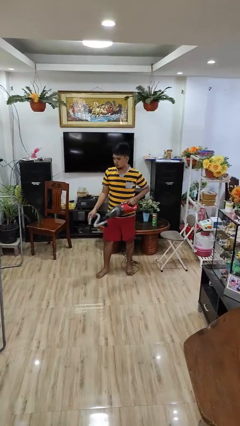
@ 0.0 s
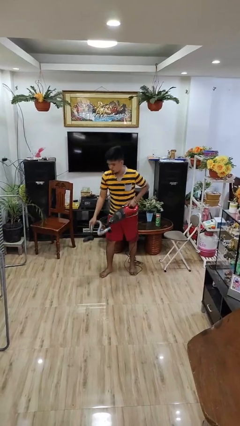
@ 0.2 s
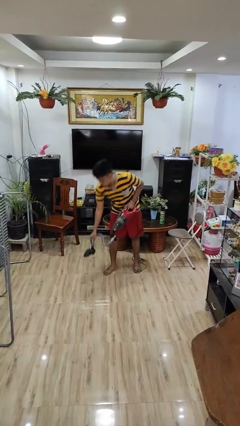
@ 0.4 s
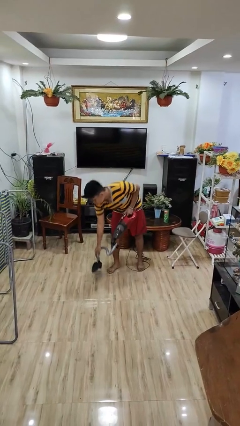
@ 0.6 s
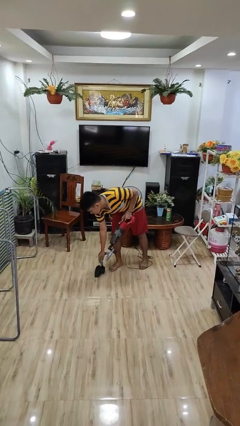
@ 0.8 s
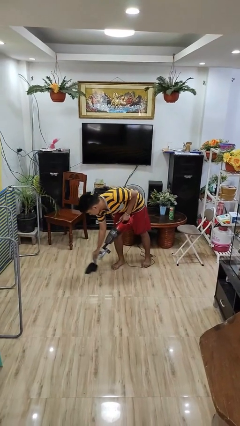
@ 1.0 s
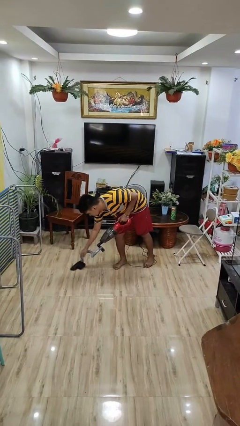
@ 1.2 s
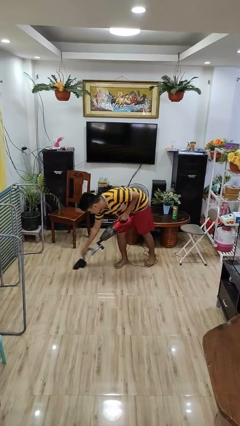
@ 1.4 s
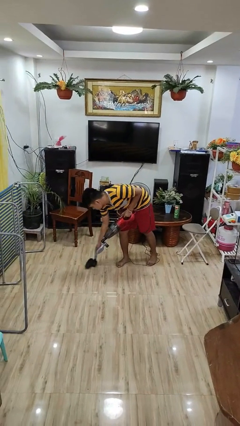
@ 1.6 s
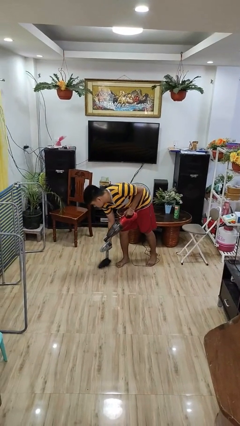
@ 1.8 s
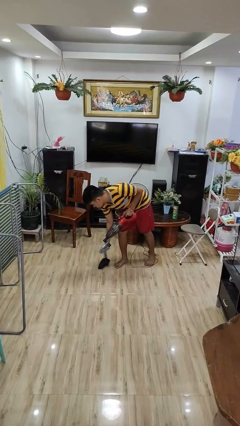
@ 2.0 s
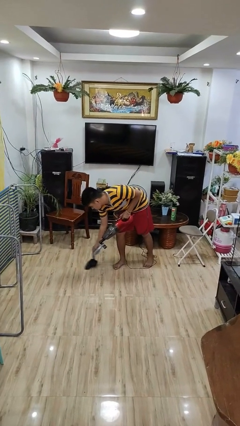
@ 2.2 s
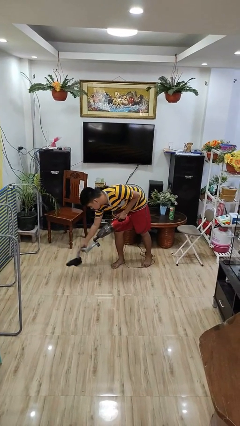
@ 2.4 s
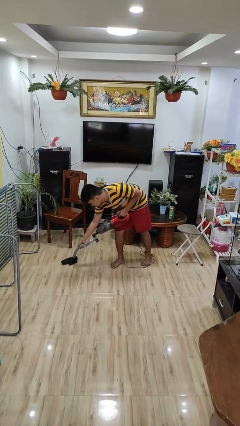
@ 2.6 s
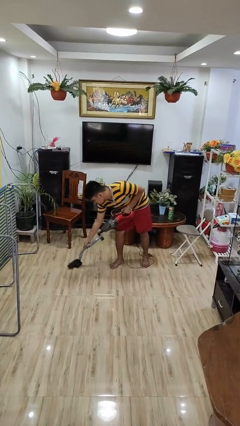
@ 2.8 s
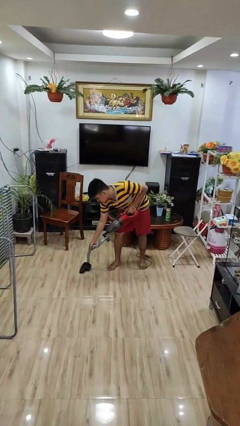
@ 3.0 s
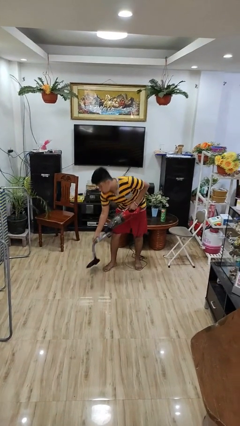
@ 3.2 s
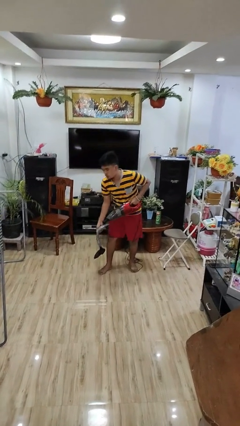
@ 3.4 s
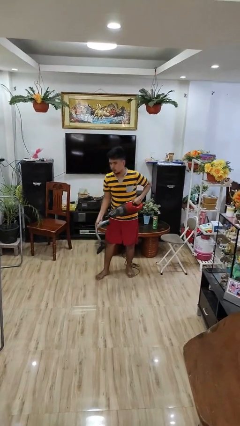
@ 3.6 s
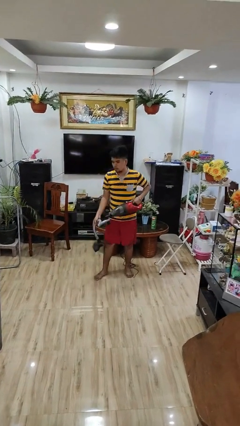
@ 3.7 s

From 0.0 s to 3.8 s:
person vacuums carpet

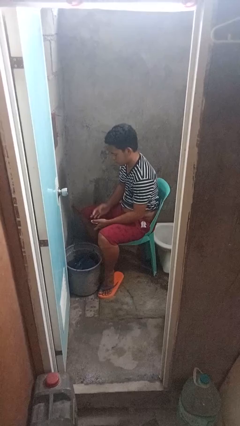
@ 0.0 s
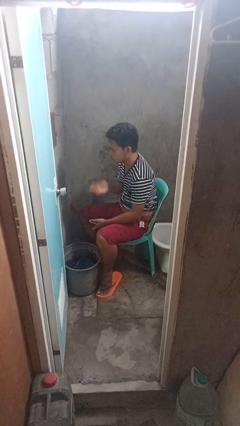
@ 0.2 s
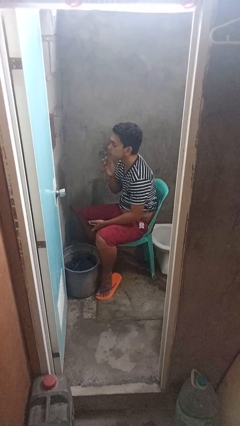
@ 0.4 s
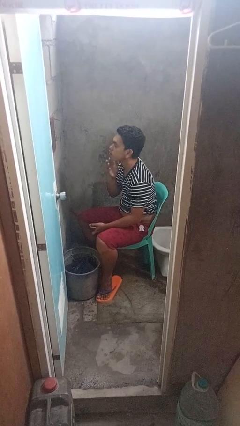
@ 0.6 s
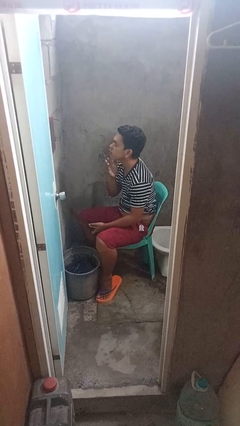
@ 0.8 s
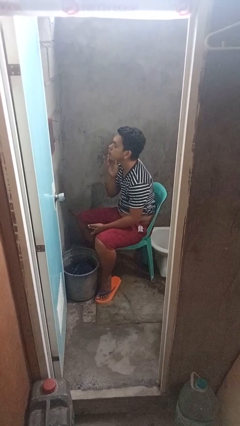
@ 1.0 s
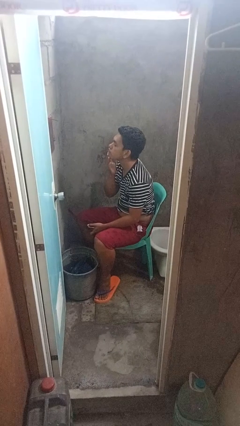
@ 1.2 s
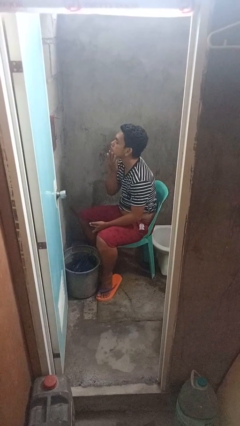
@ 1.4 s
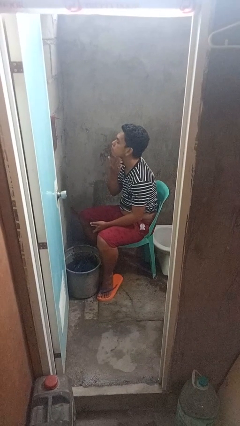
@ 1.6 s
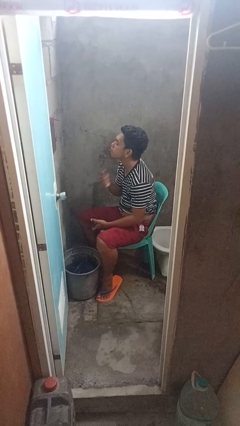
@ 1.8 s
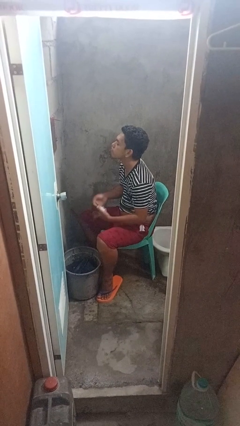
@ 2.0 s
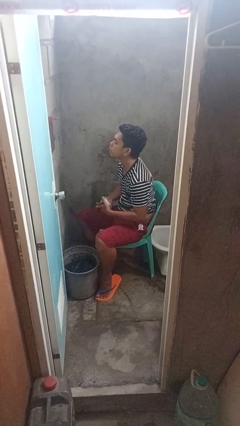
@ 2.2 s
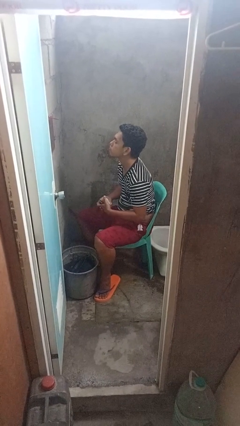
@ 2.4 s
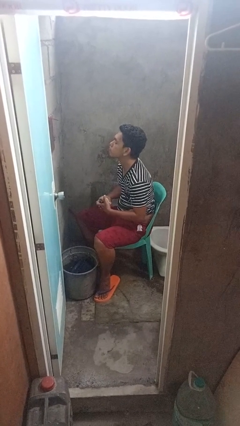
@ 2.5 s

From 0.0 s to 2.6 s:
person applies shaving cream

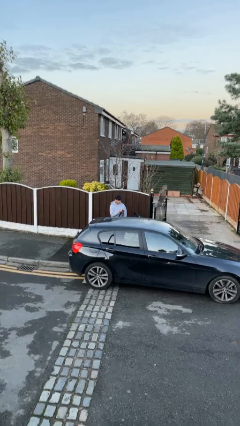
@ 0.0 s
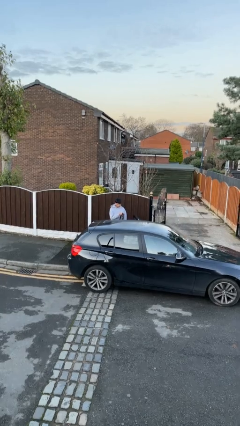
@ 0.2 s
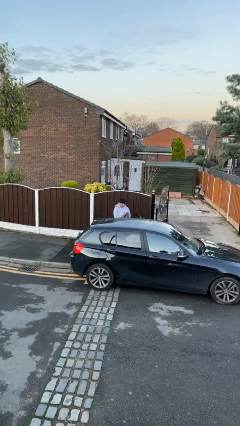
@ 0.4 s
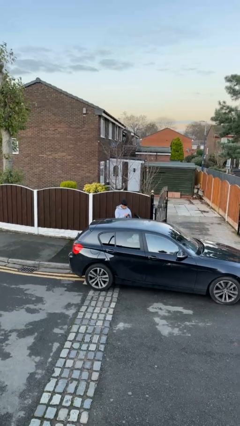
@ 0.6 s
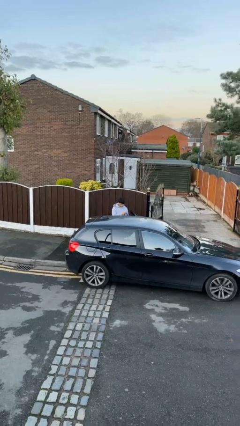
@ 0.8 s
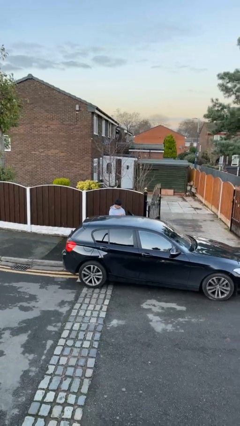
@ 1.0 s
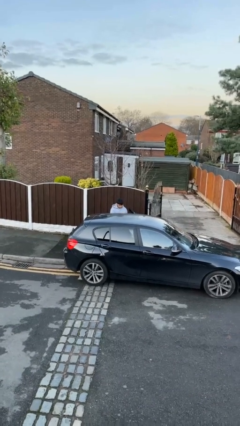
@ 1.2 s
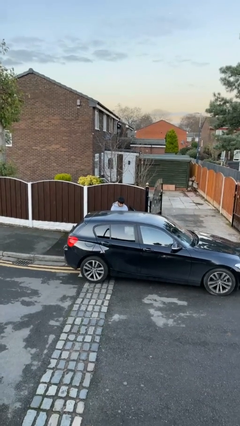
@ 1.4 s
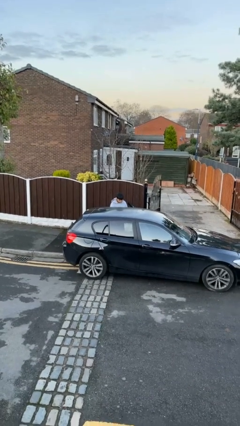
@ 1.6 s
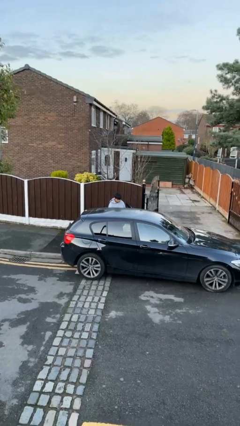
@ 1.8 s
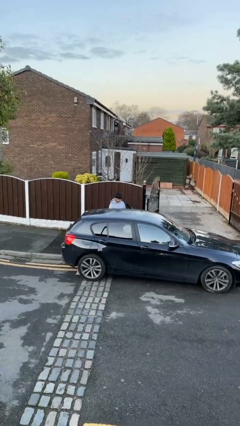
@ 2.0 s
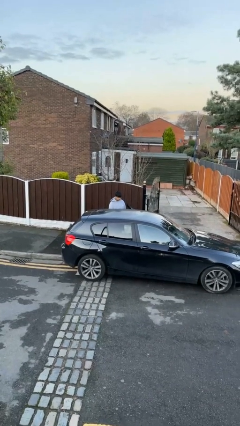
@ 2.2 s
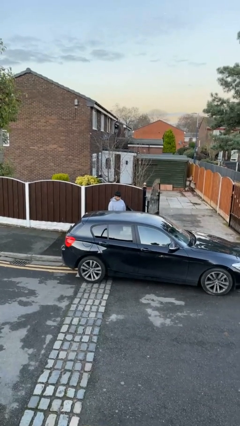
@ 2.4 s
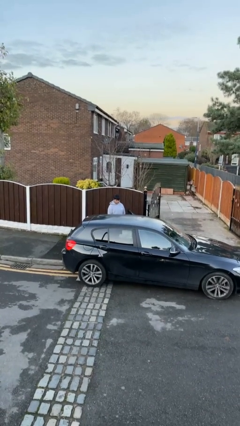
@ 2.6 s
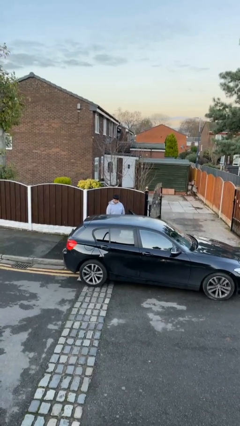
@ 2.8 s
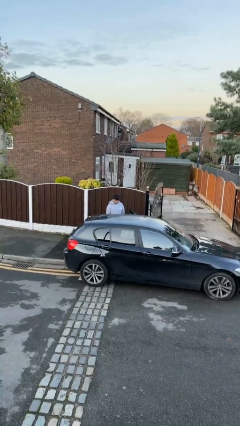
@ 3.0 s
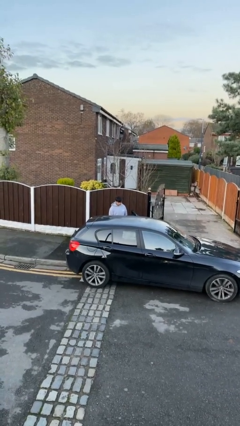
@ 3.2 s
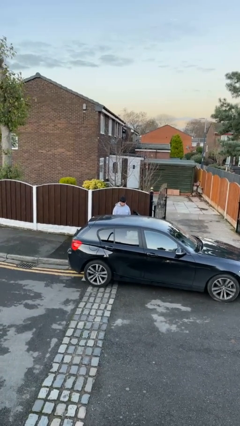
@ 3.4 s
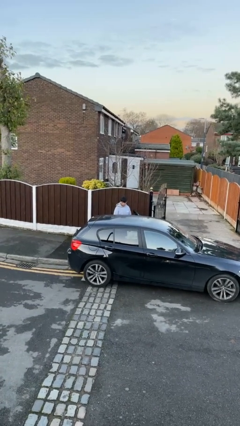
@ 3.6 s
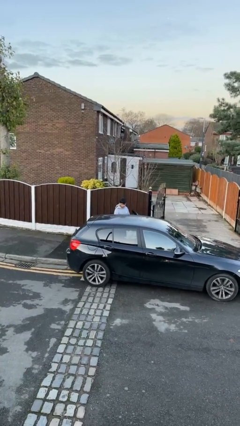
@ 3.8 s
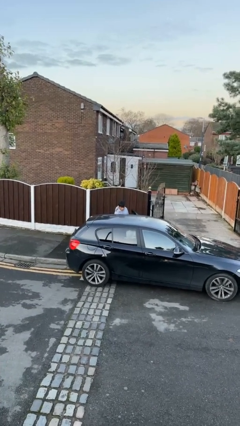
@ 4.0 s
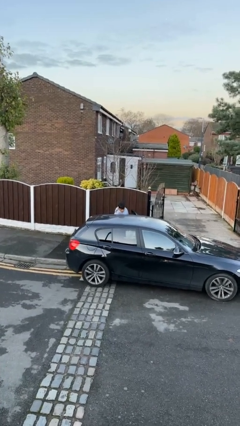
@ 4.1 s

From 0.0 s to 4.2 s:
person loads car

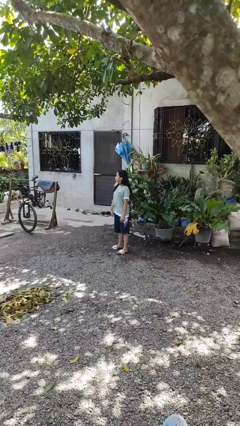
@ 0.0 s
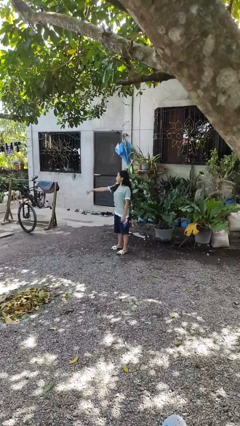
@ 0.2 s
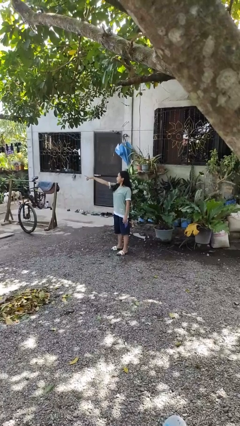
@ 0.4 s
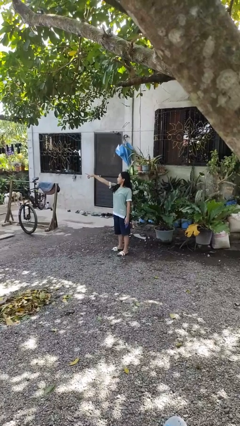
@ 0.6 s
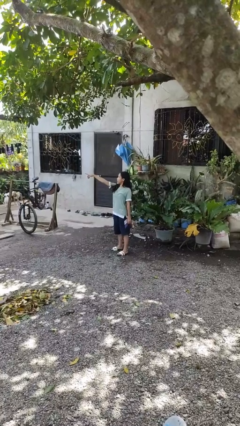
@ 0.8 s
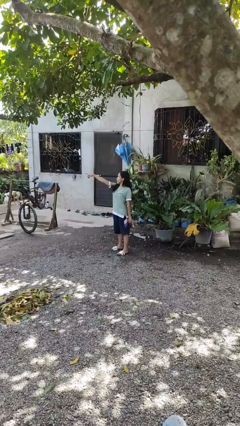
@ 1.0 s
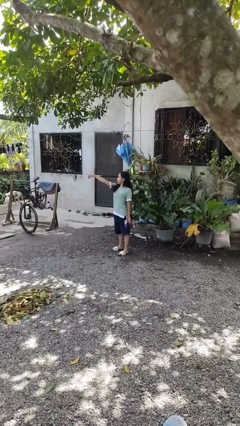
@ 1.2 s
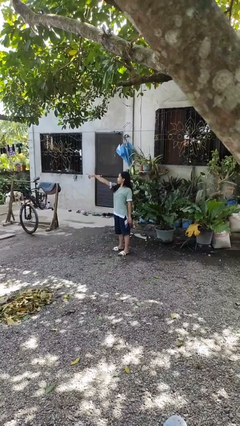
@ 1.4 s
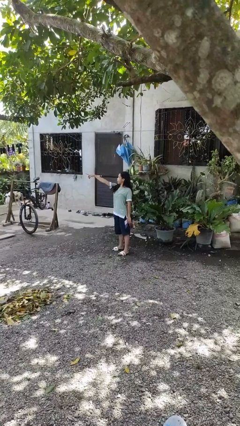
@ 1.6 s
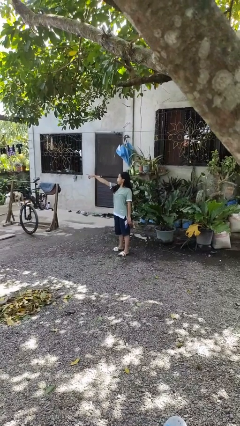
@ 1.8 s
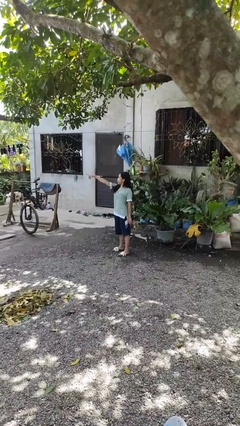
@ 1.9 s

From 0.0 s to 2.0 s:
person points at person

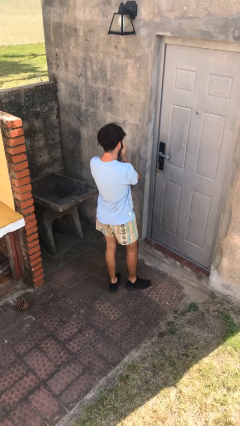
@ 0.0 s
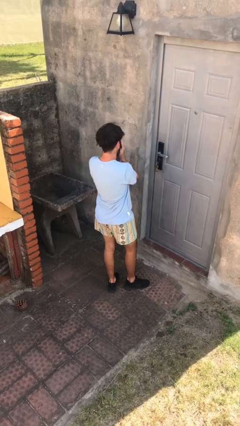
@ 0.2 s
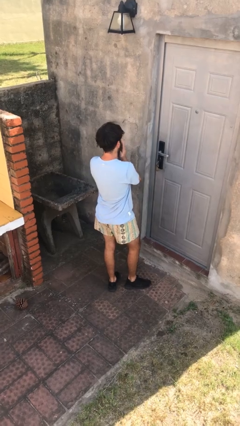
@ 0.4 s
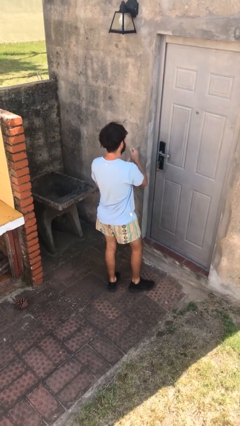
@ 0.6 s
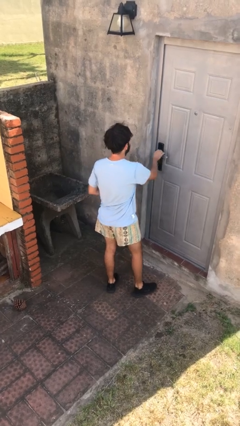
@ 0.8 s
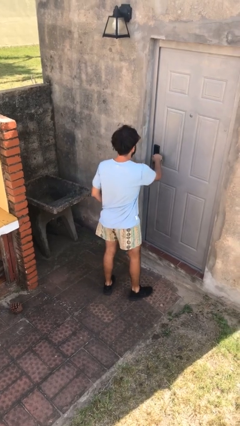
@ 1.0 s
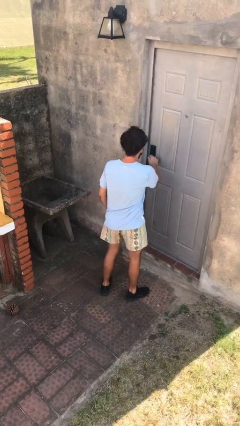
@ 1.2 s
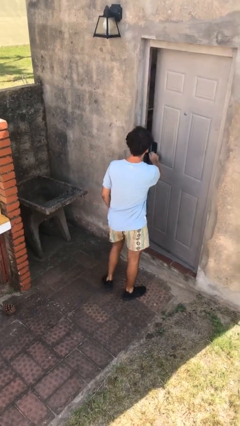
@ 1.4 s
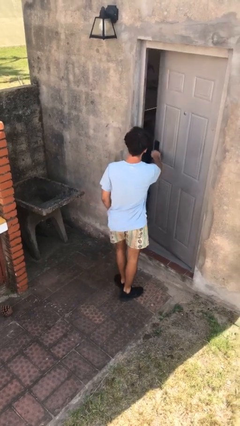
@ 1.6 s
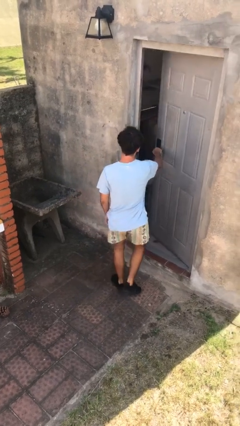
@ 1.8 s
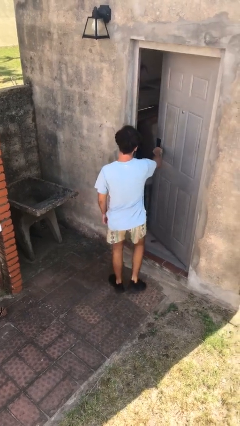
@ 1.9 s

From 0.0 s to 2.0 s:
person opens facility door

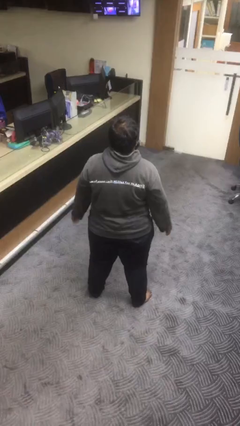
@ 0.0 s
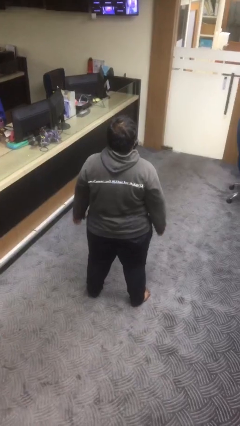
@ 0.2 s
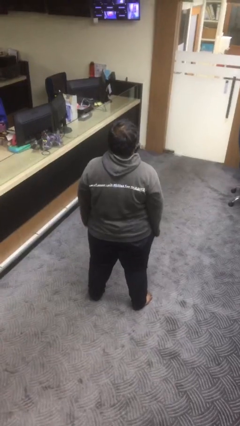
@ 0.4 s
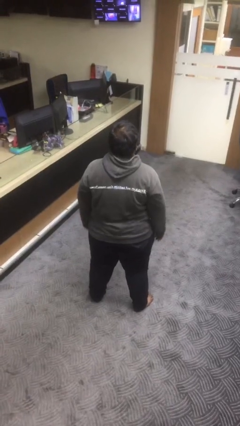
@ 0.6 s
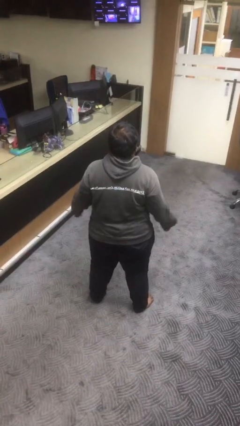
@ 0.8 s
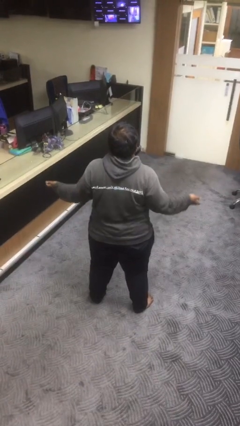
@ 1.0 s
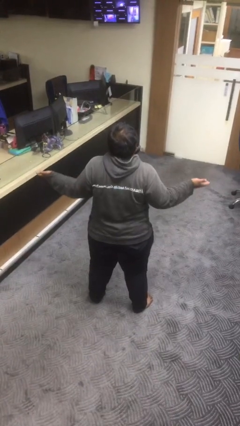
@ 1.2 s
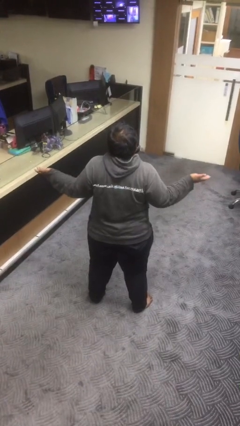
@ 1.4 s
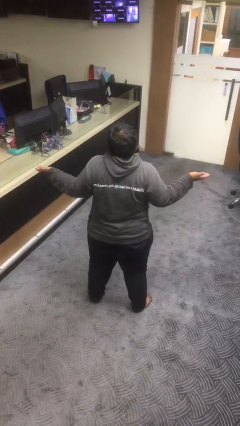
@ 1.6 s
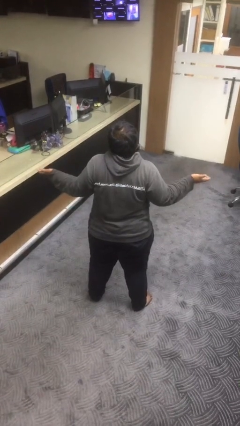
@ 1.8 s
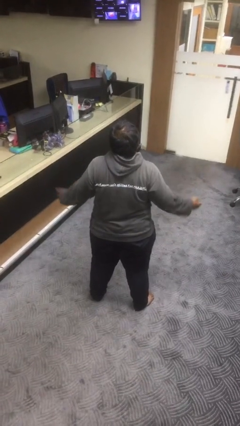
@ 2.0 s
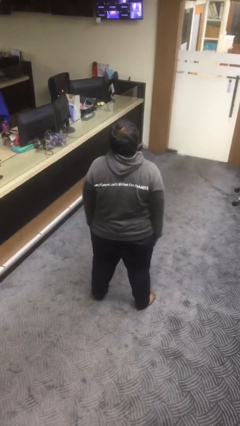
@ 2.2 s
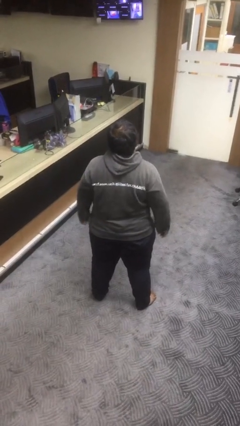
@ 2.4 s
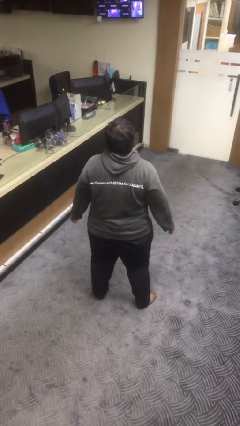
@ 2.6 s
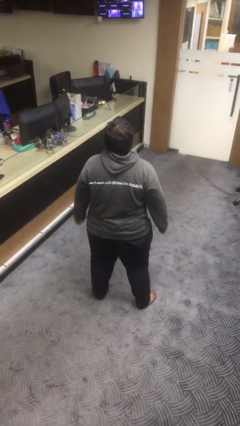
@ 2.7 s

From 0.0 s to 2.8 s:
person shrugs
